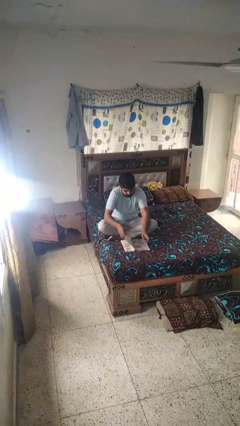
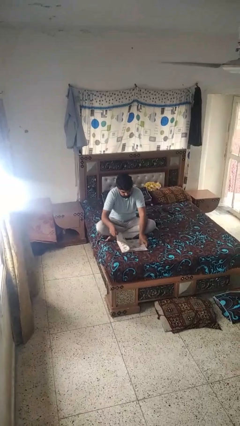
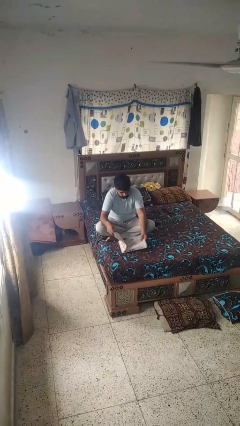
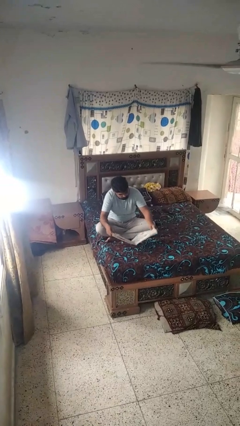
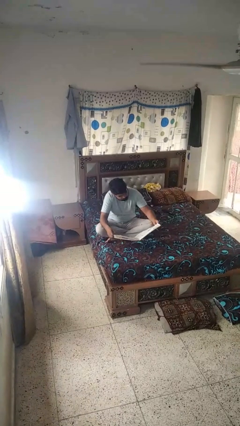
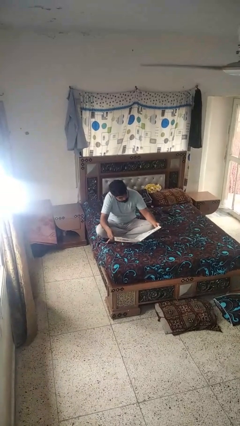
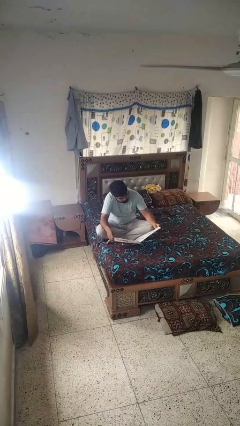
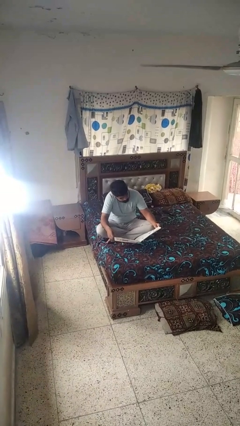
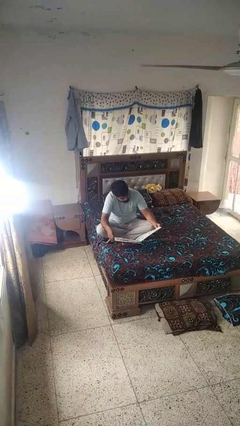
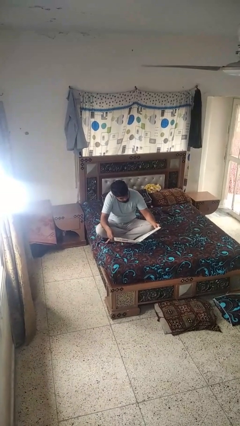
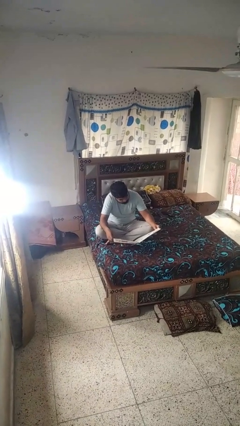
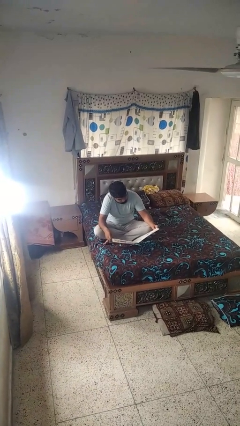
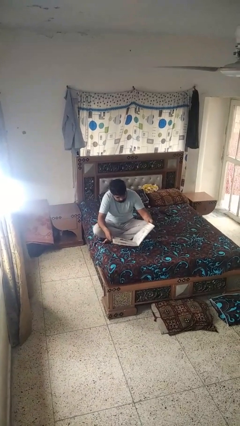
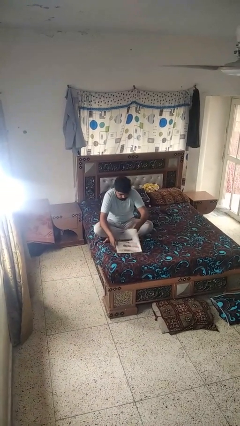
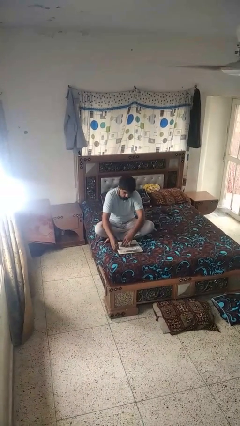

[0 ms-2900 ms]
person reads magazine

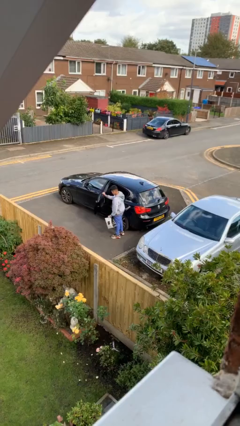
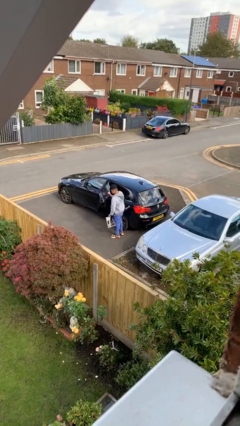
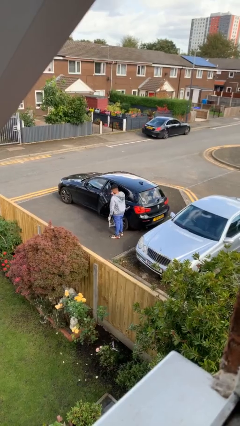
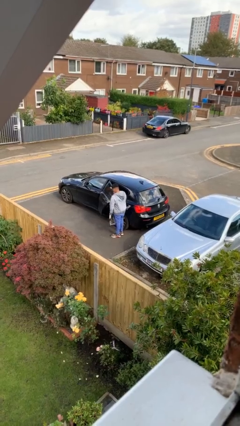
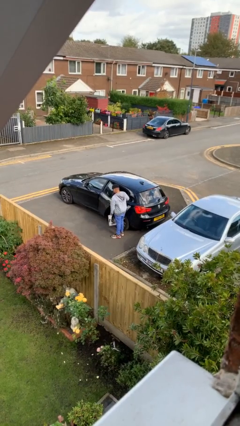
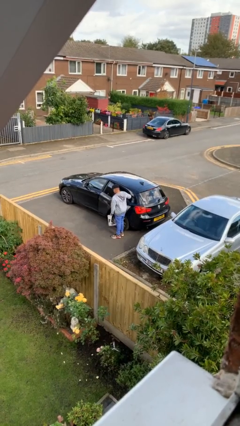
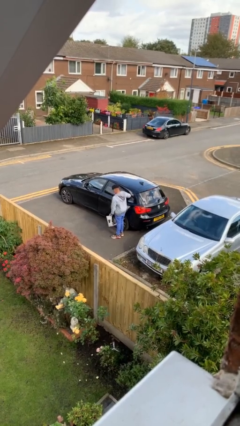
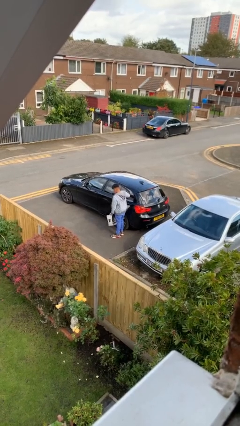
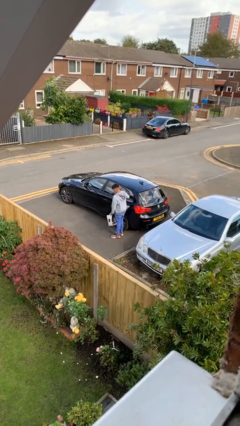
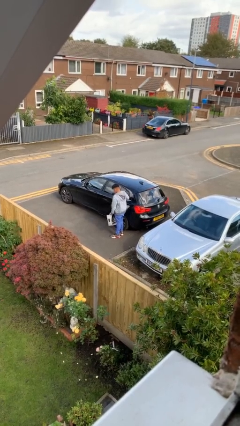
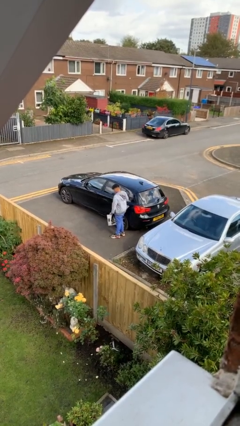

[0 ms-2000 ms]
person closes car door

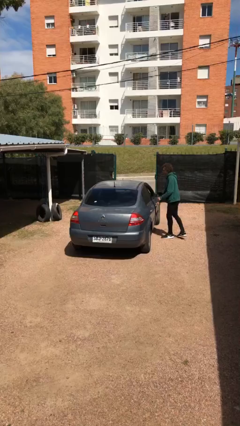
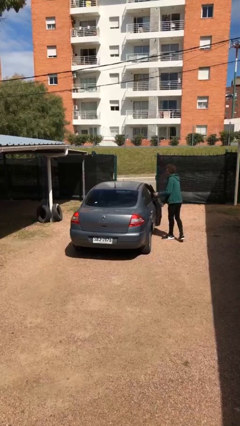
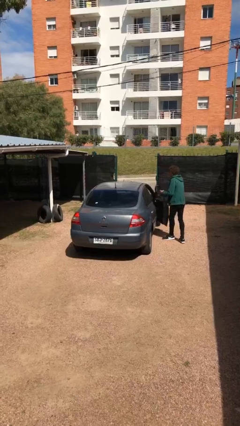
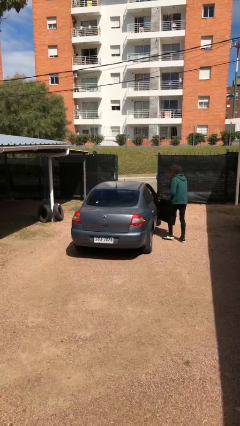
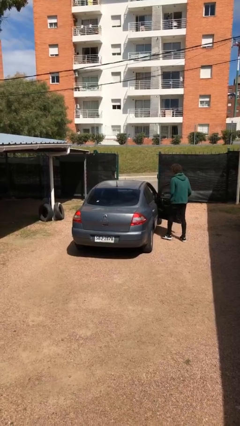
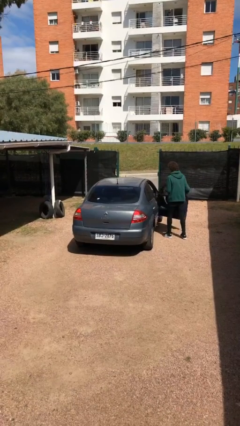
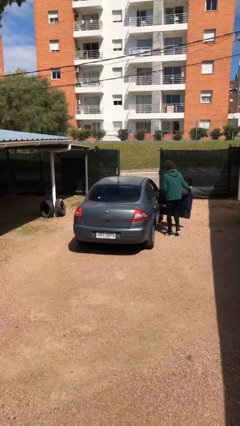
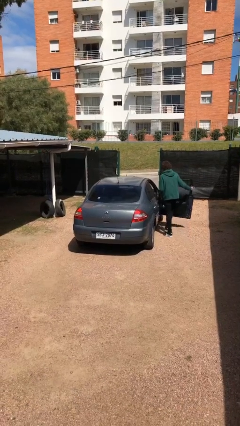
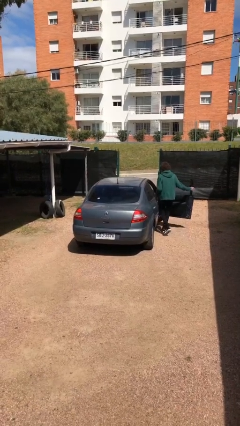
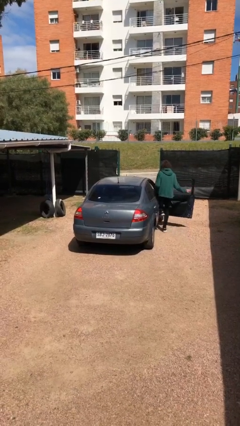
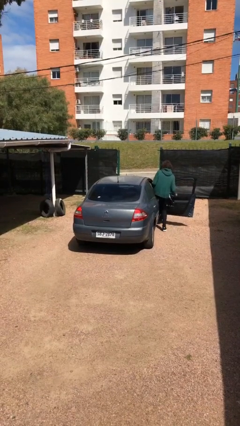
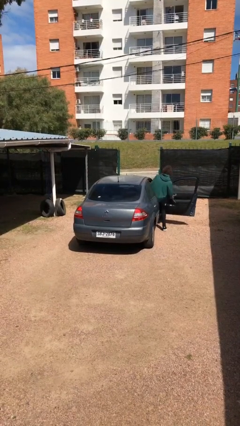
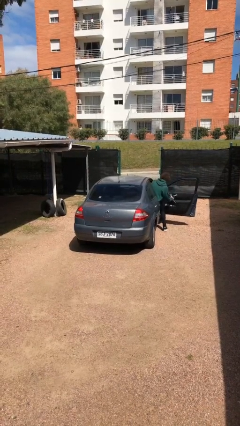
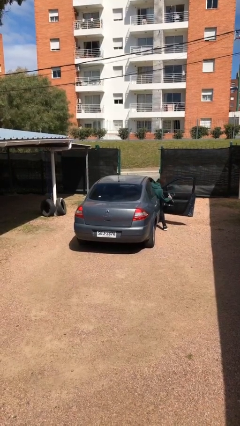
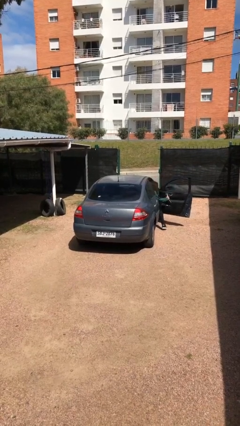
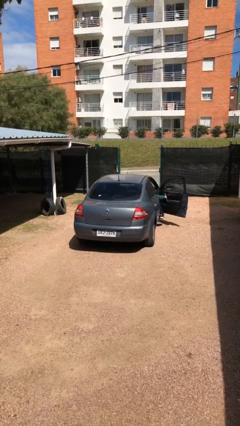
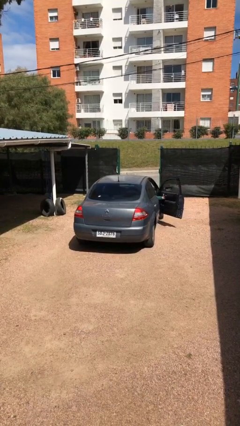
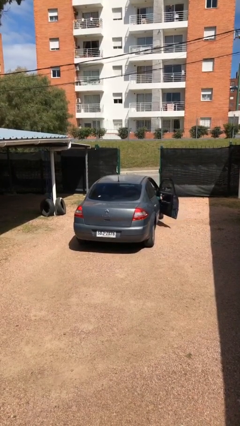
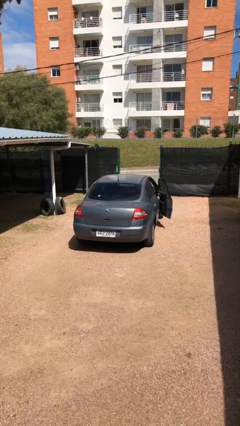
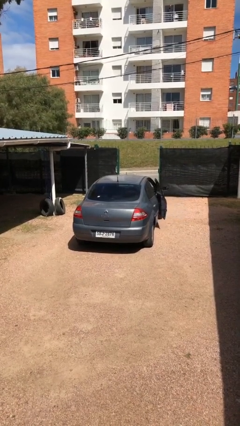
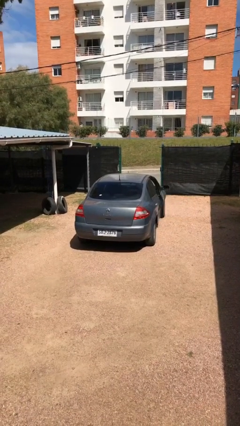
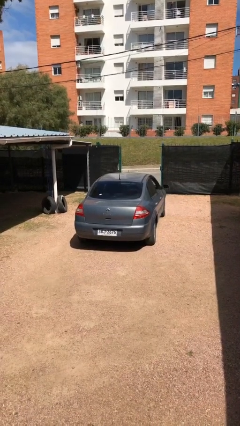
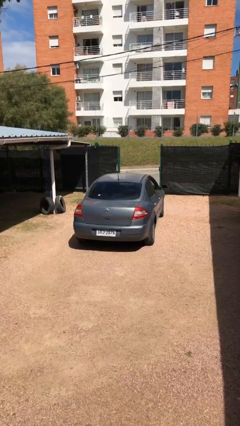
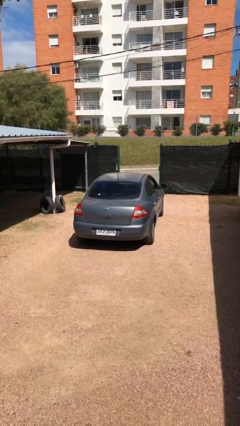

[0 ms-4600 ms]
car picks up person

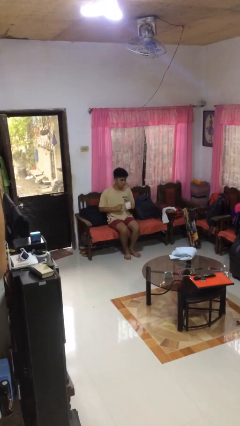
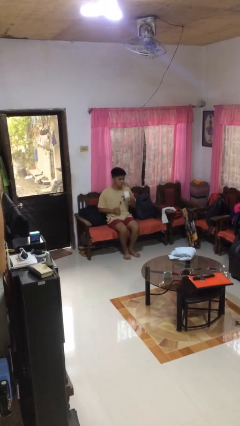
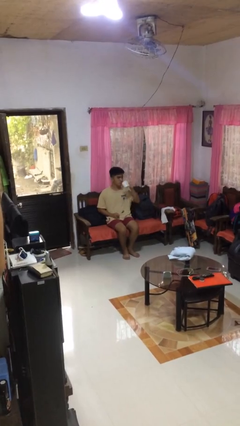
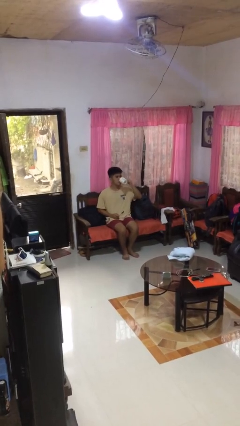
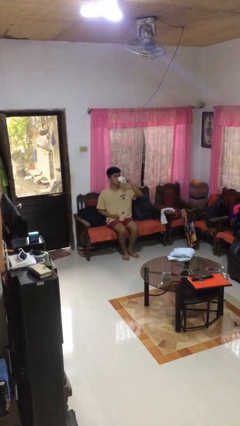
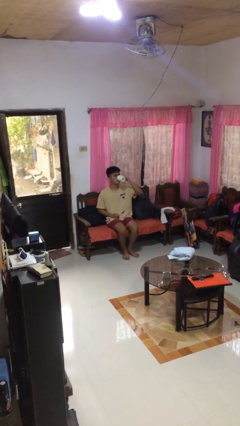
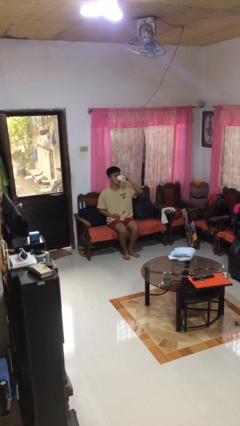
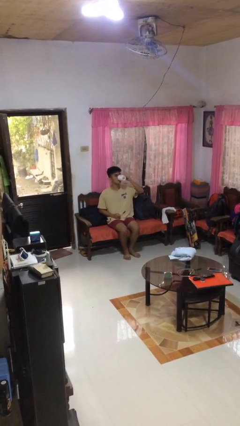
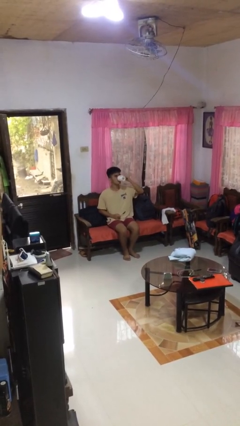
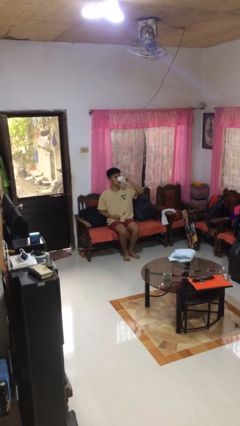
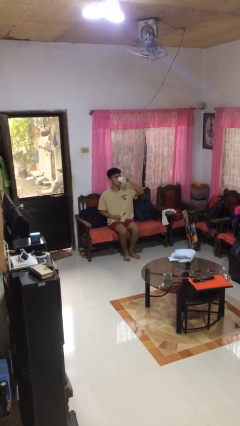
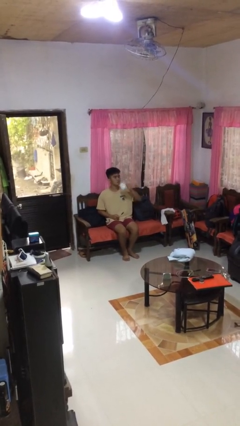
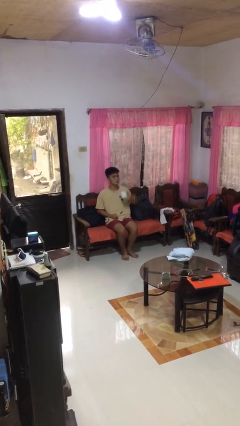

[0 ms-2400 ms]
person drinks from mug

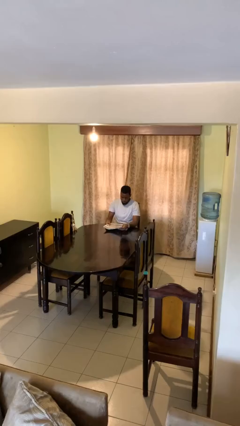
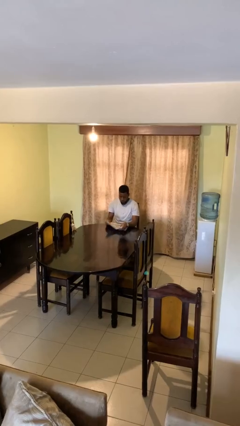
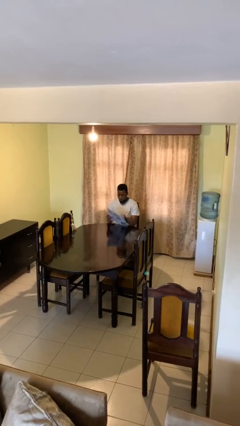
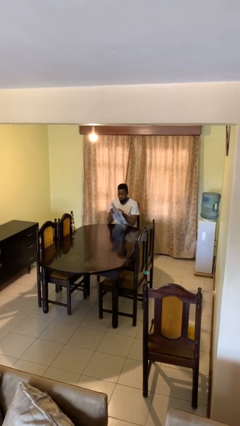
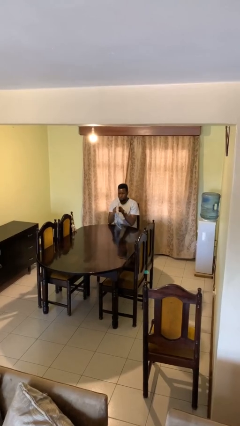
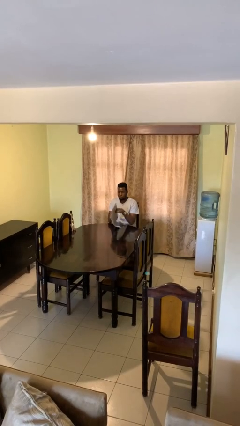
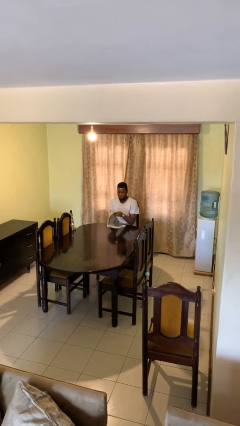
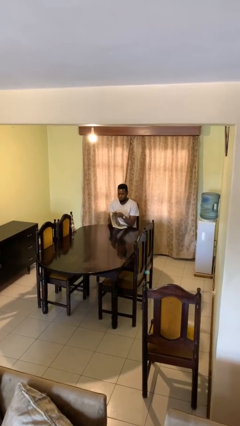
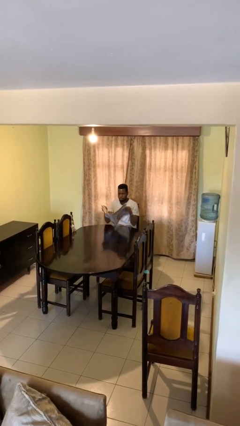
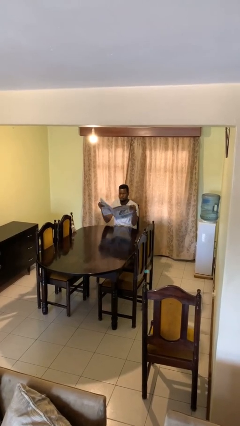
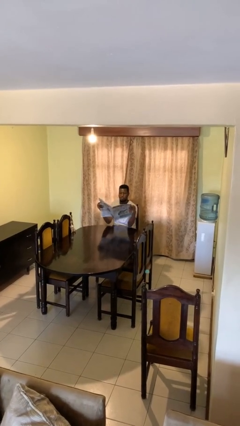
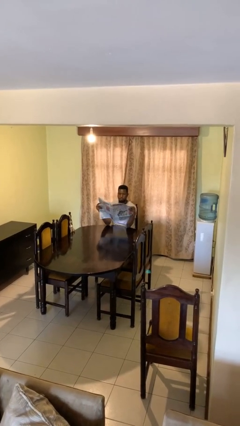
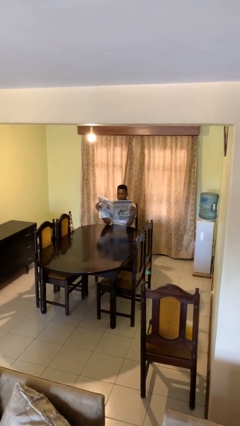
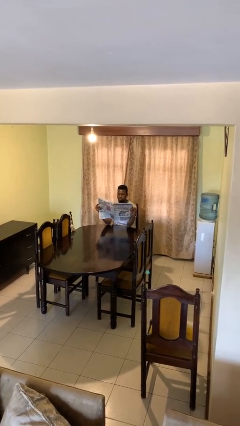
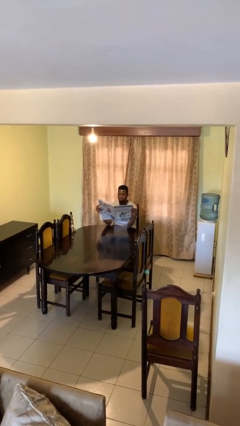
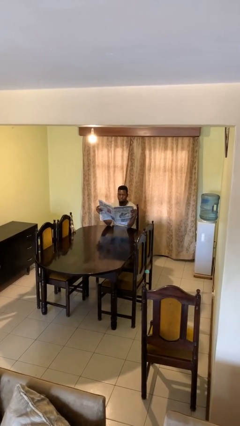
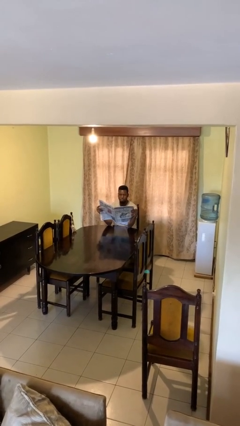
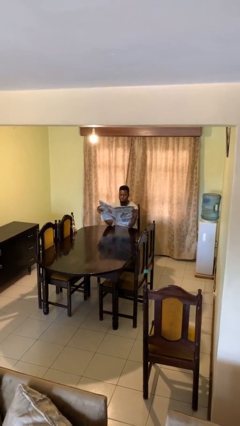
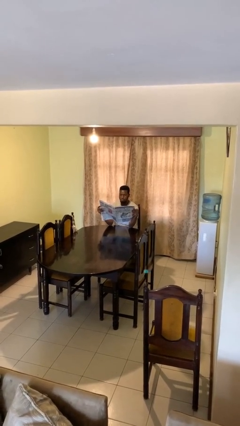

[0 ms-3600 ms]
person reads document

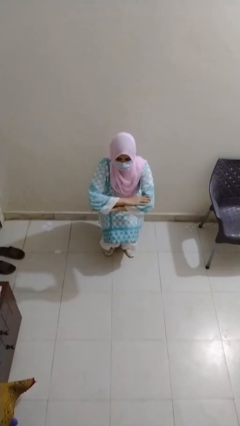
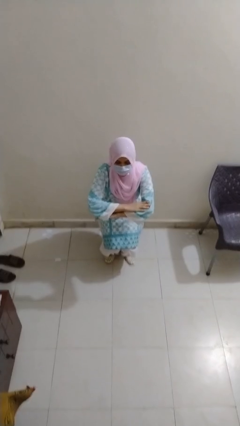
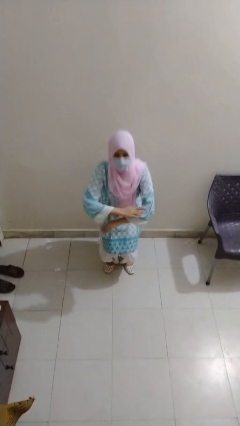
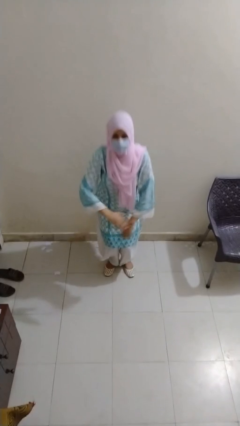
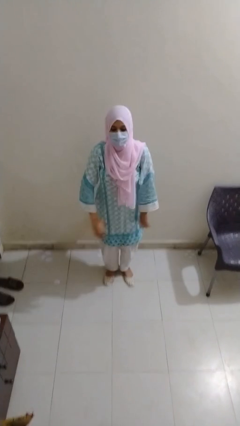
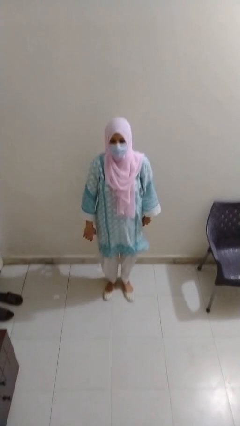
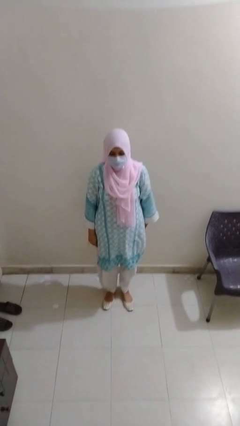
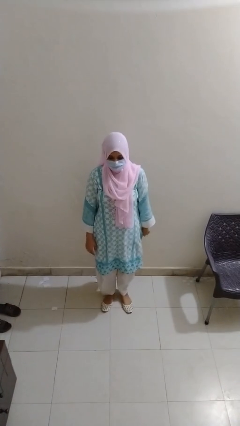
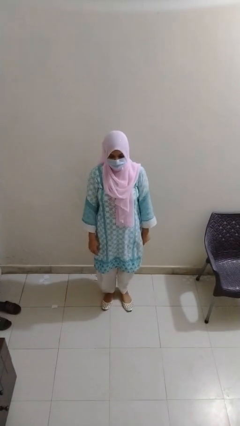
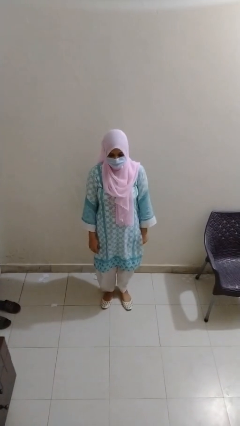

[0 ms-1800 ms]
person stands up

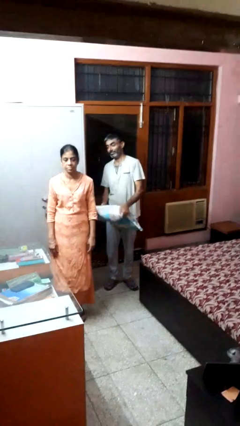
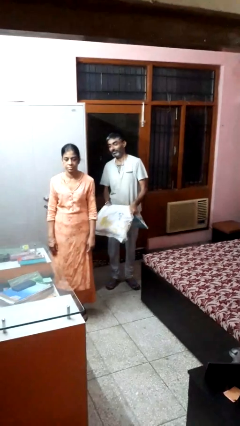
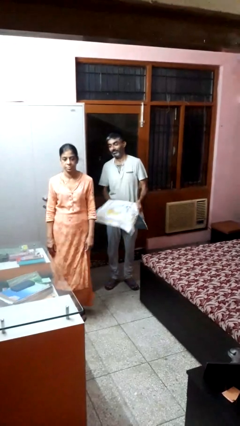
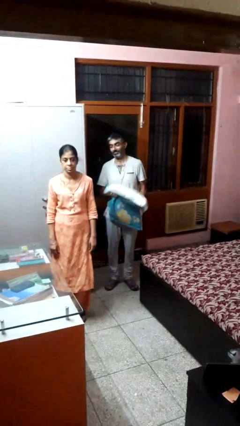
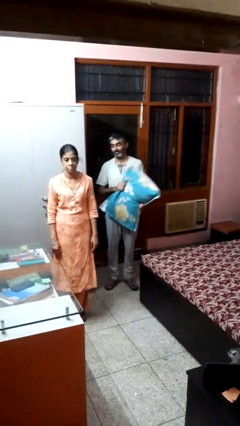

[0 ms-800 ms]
person hits person with pillow
